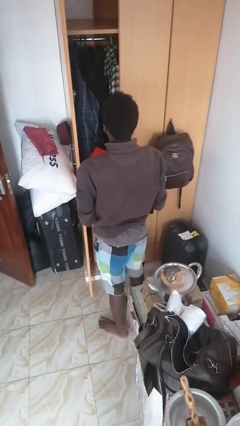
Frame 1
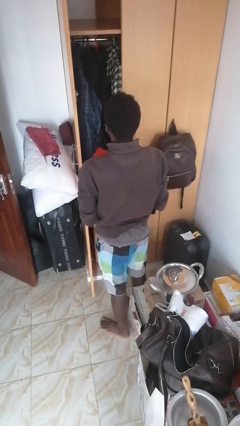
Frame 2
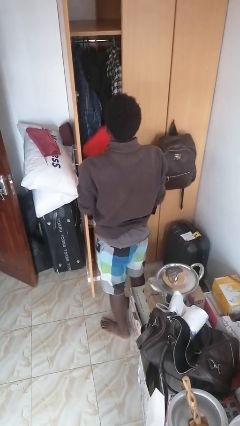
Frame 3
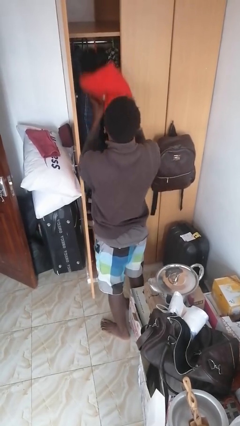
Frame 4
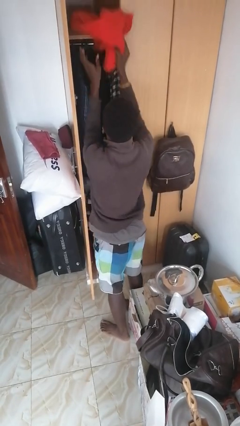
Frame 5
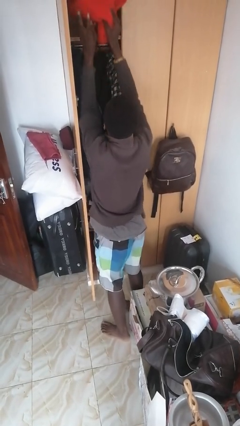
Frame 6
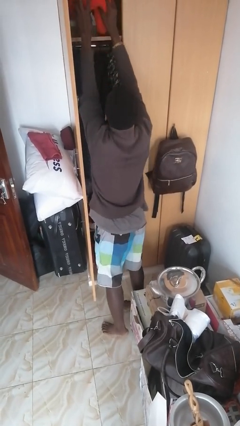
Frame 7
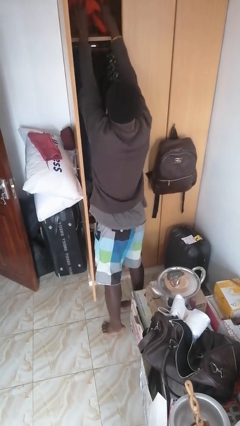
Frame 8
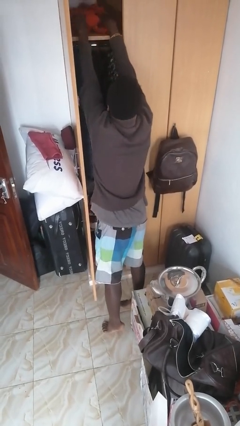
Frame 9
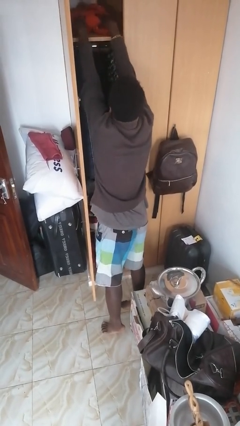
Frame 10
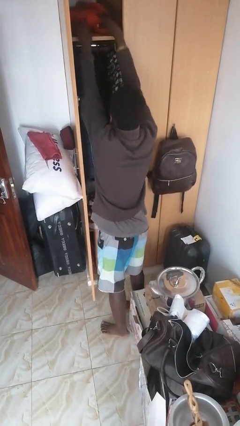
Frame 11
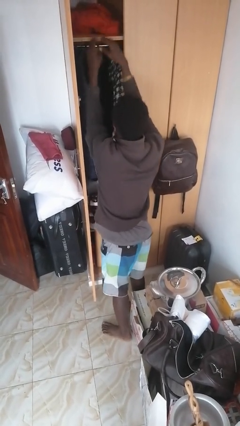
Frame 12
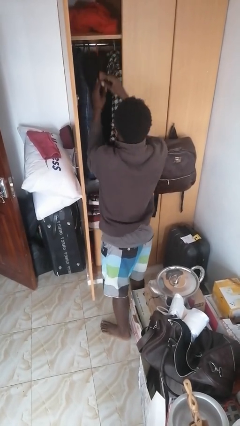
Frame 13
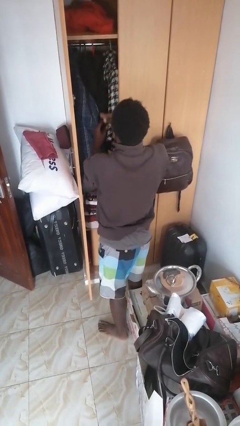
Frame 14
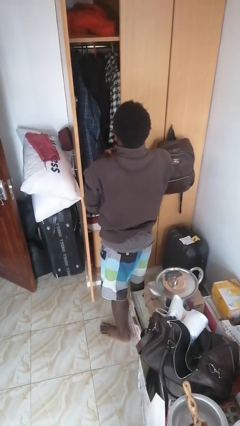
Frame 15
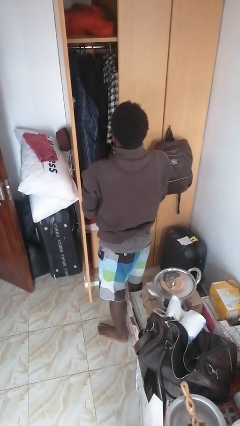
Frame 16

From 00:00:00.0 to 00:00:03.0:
person puts down object on shelf

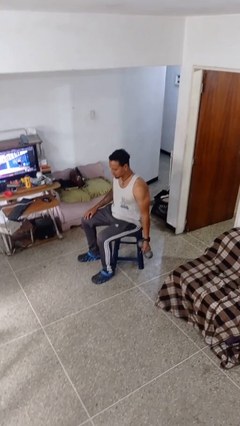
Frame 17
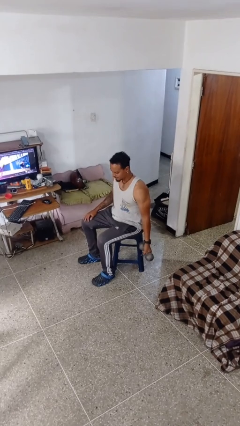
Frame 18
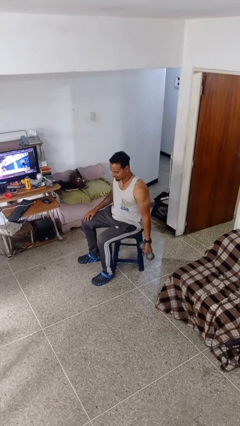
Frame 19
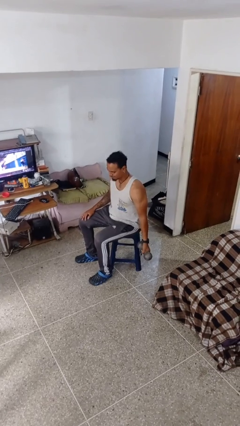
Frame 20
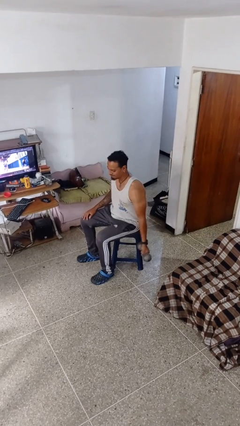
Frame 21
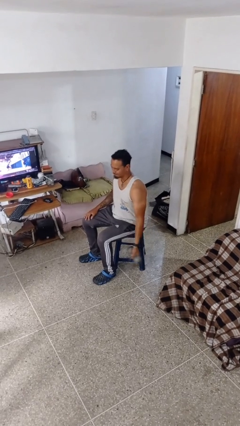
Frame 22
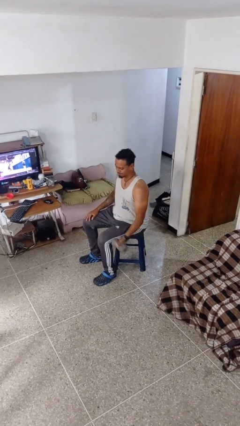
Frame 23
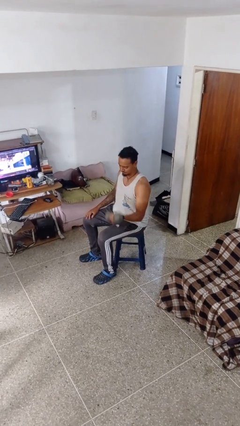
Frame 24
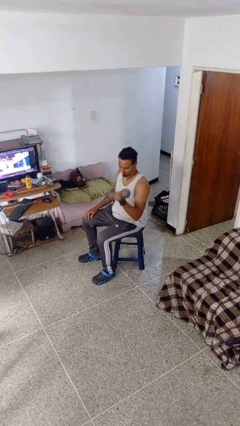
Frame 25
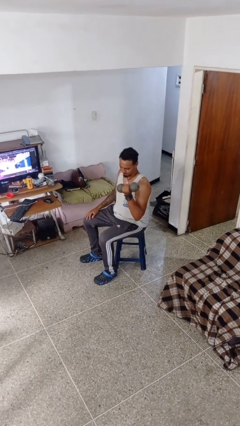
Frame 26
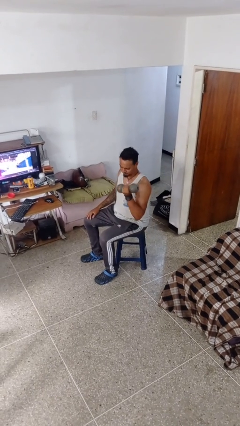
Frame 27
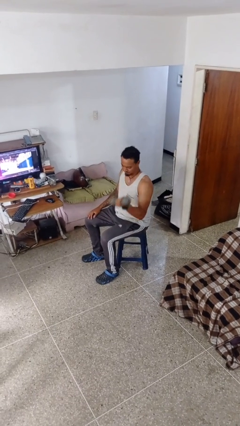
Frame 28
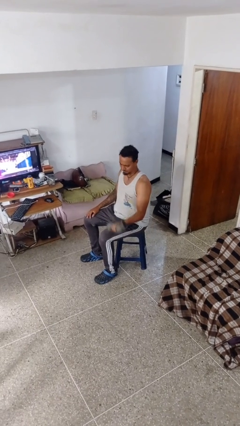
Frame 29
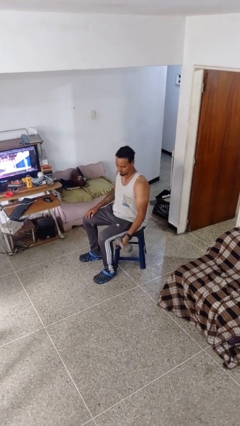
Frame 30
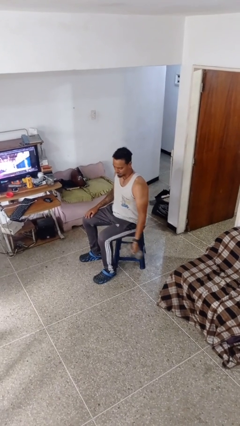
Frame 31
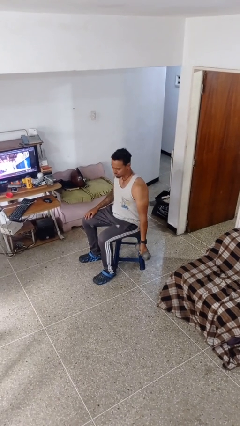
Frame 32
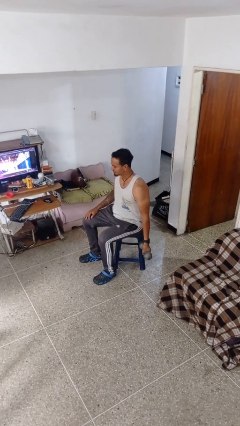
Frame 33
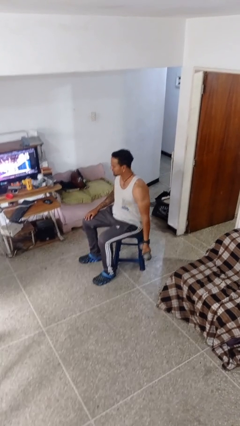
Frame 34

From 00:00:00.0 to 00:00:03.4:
person lifts dumbbells

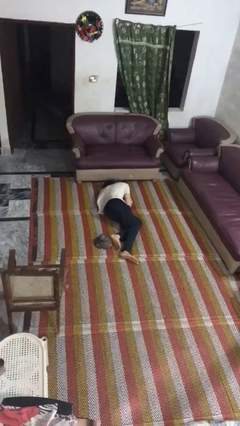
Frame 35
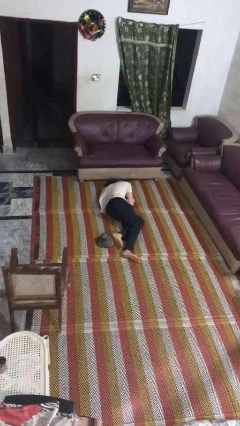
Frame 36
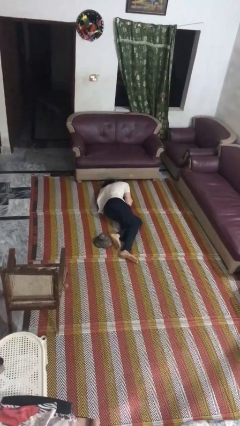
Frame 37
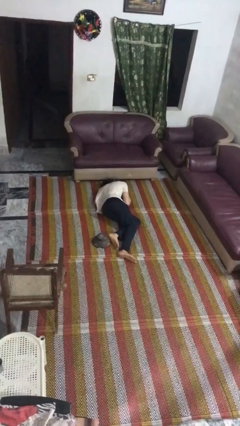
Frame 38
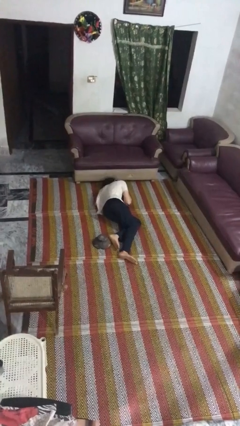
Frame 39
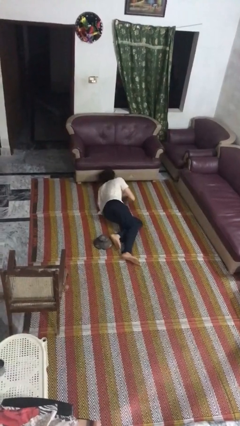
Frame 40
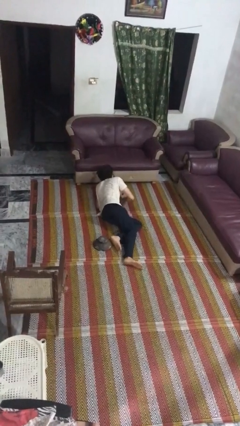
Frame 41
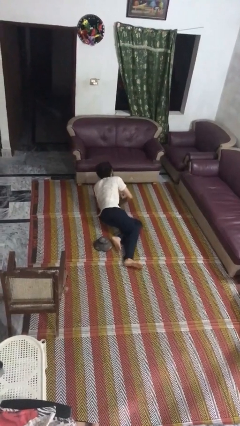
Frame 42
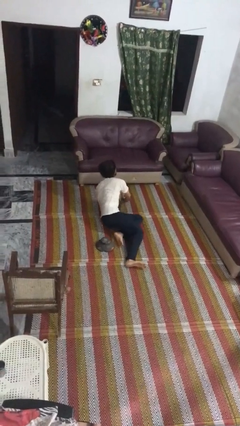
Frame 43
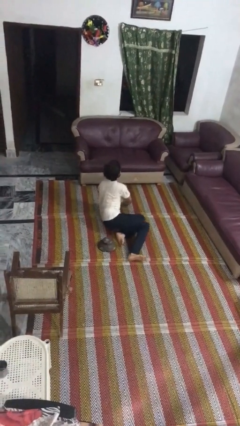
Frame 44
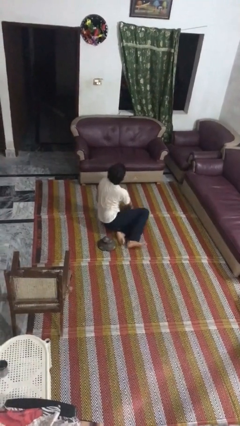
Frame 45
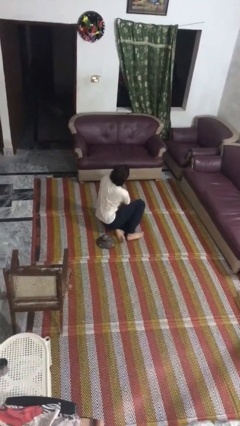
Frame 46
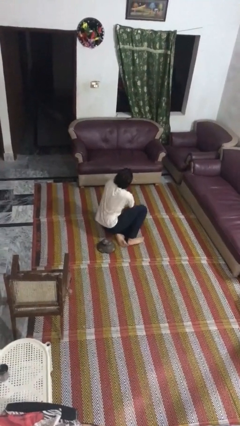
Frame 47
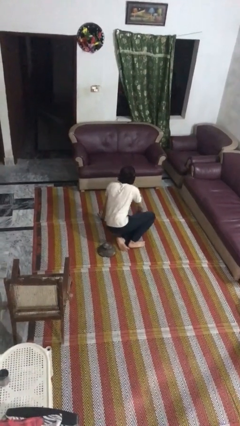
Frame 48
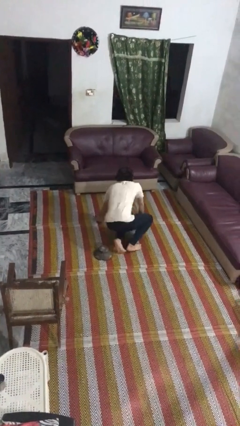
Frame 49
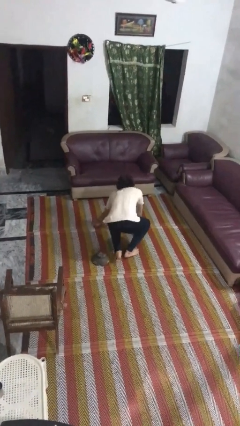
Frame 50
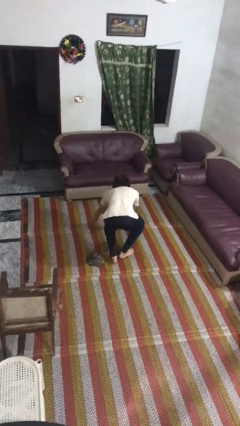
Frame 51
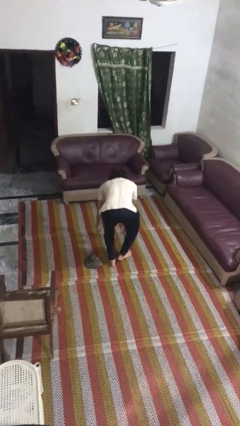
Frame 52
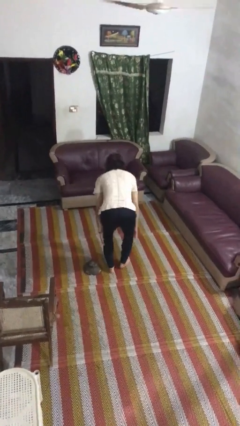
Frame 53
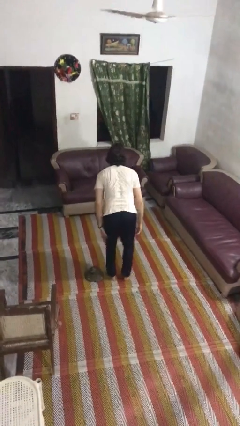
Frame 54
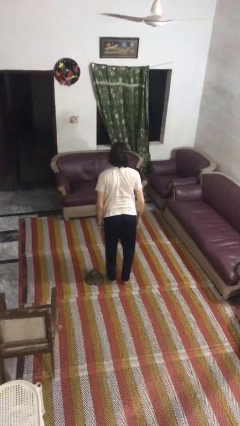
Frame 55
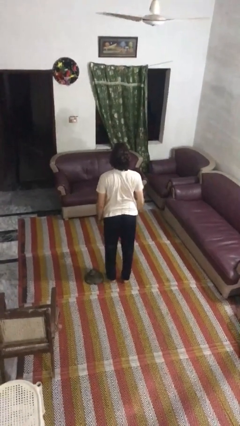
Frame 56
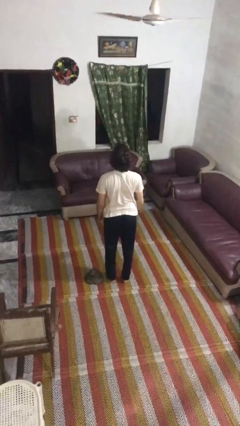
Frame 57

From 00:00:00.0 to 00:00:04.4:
person stands up from floor

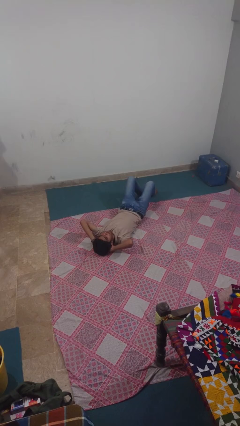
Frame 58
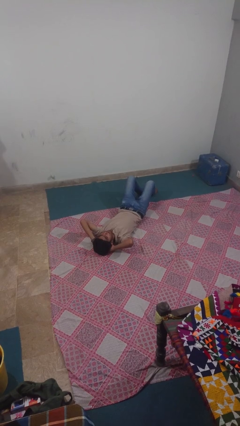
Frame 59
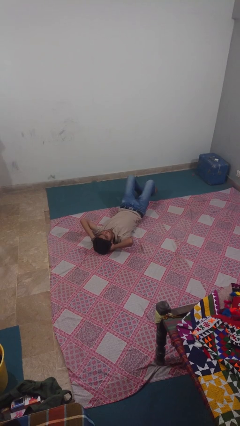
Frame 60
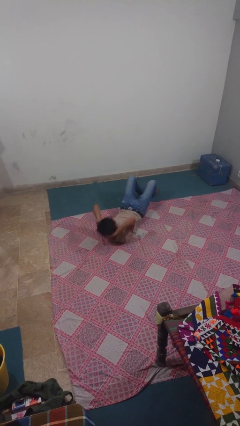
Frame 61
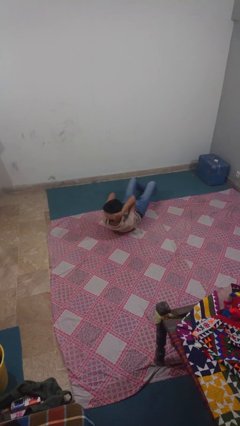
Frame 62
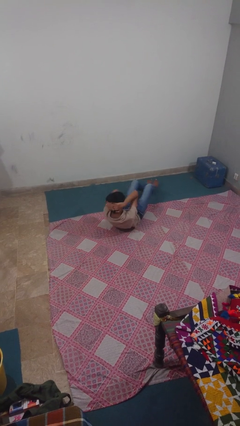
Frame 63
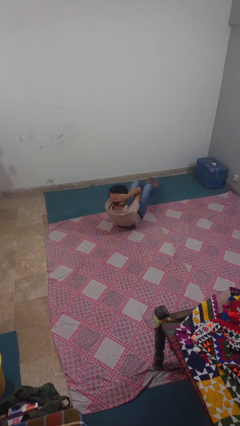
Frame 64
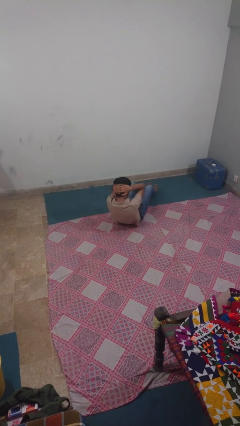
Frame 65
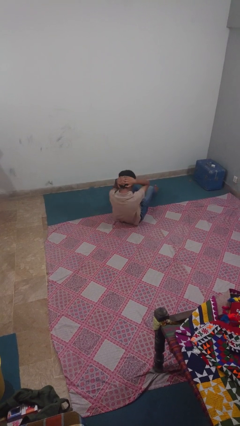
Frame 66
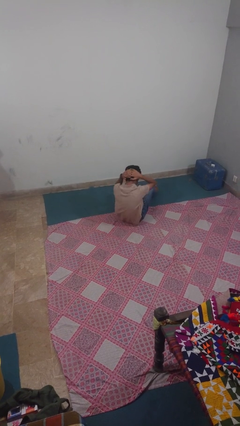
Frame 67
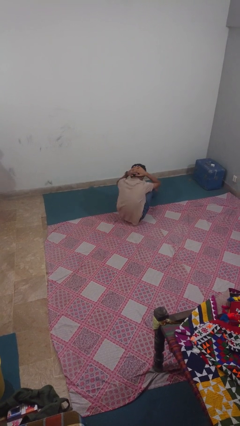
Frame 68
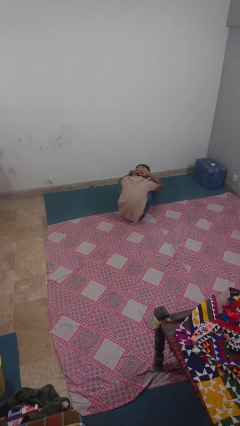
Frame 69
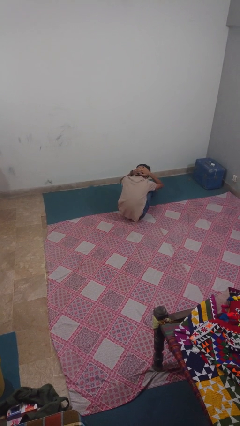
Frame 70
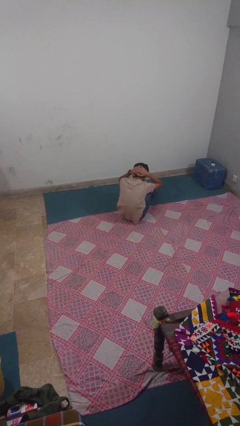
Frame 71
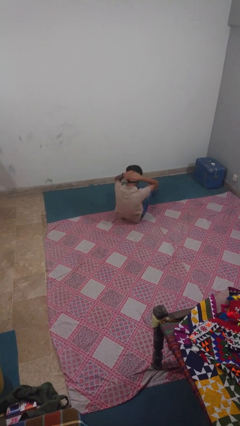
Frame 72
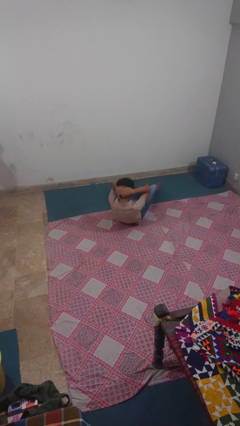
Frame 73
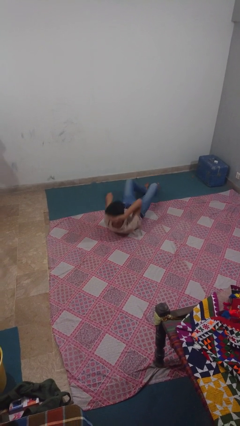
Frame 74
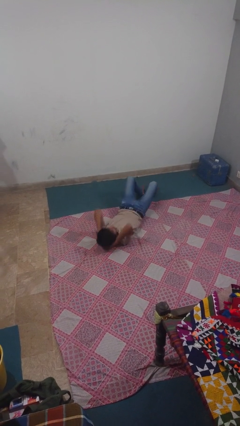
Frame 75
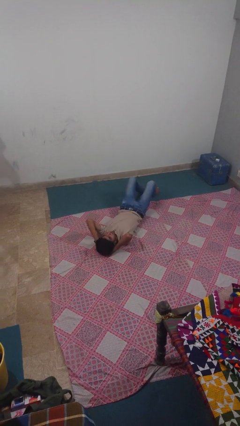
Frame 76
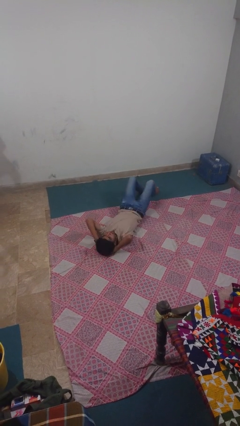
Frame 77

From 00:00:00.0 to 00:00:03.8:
person exercises with situp

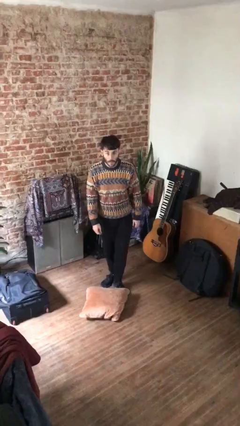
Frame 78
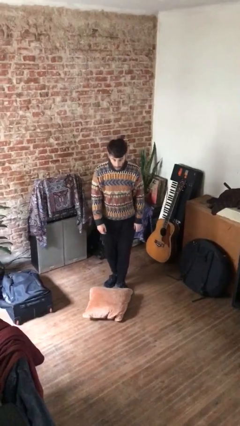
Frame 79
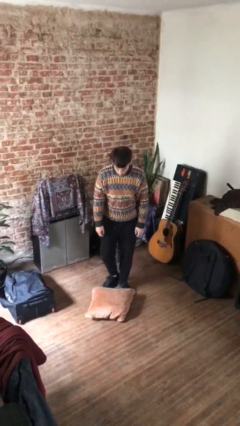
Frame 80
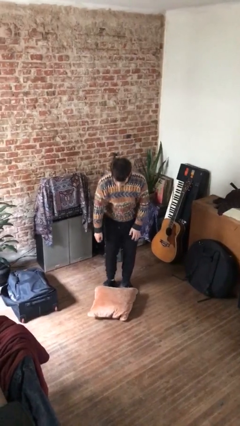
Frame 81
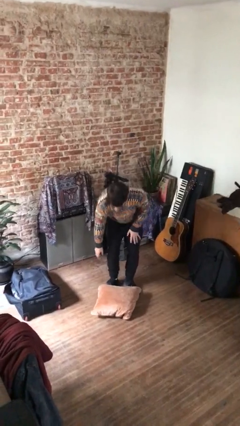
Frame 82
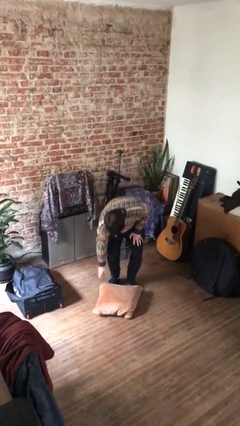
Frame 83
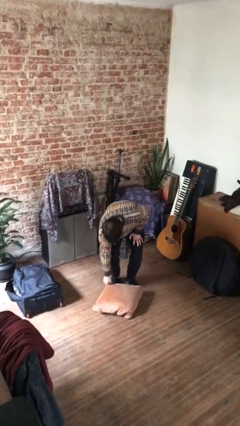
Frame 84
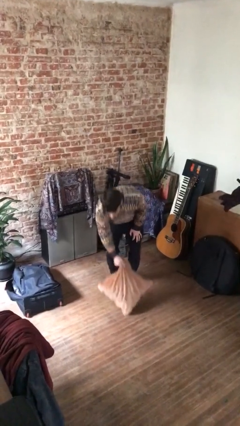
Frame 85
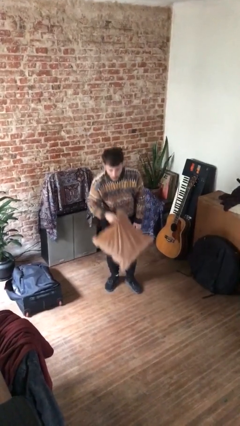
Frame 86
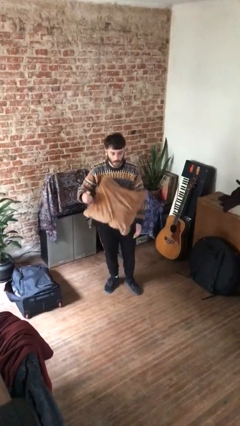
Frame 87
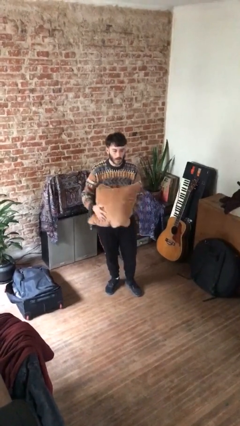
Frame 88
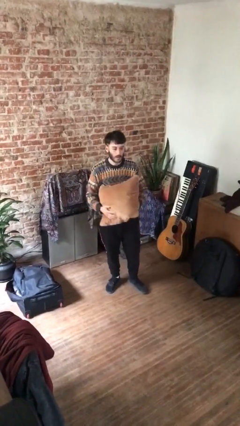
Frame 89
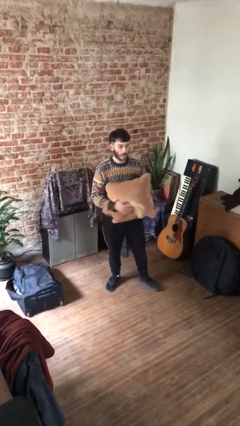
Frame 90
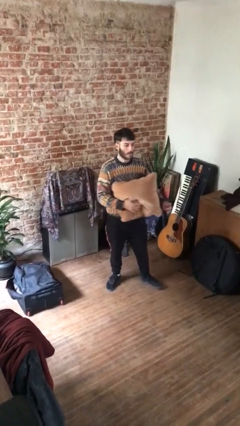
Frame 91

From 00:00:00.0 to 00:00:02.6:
person picks up object from floor

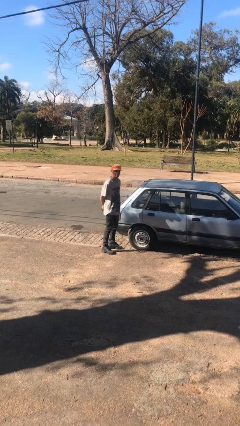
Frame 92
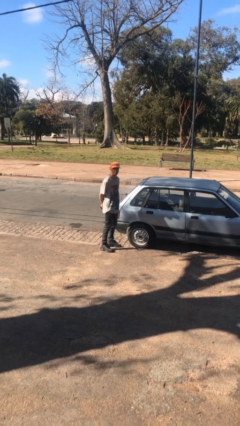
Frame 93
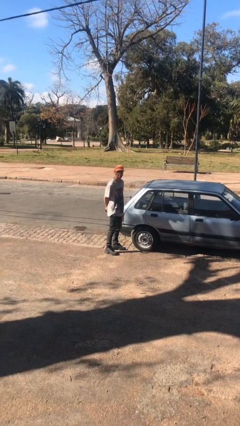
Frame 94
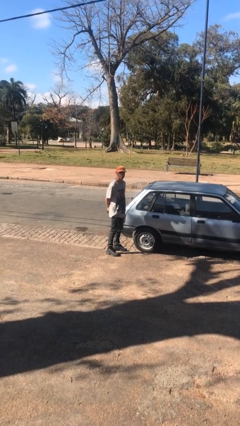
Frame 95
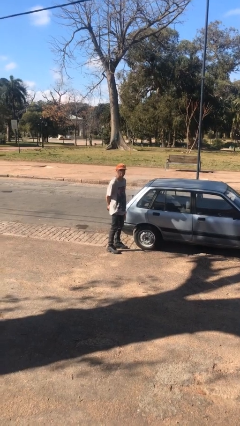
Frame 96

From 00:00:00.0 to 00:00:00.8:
person walks around car
